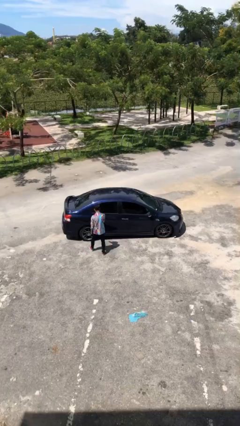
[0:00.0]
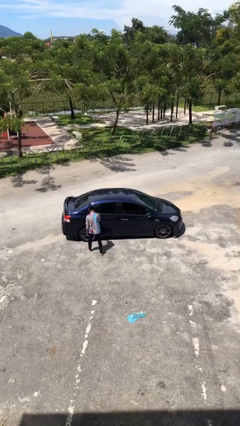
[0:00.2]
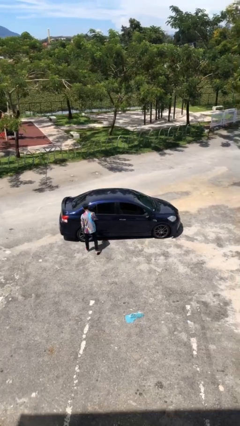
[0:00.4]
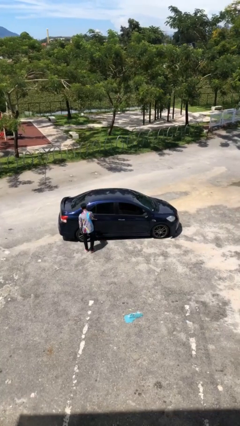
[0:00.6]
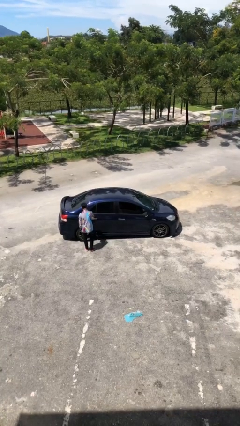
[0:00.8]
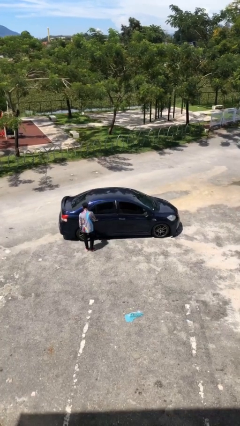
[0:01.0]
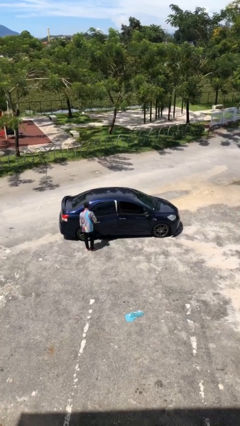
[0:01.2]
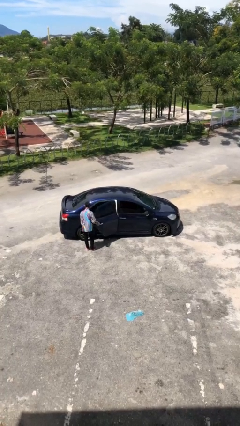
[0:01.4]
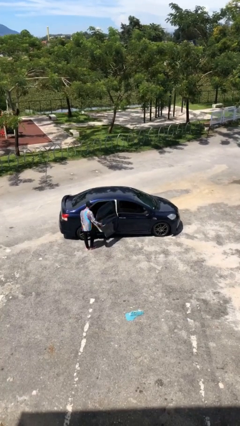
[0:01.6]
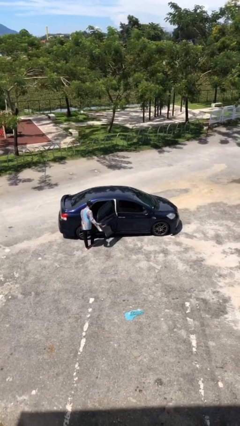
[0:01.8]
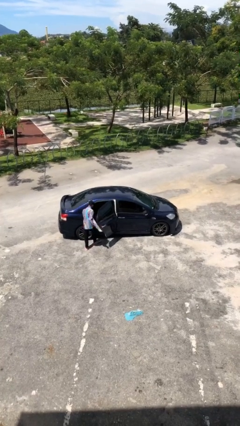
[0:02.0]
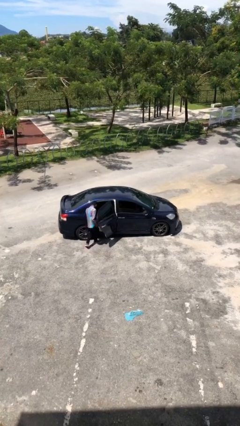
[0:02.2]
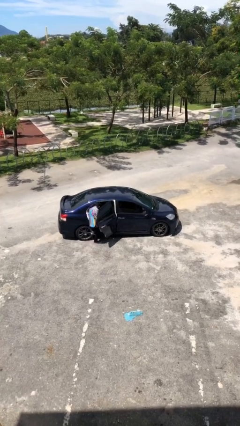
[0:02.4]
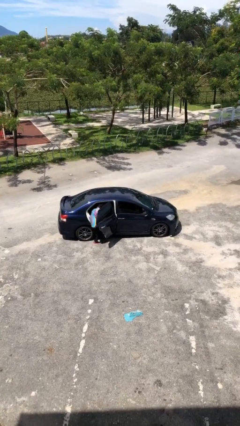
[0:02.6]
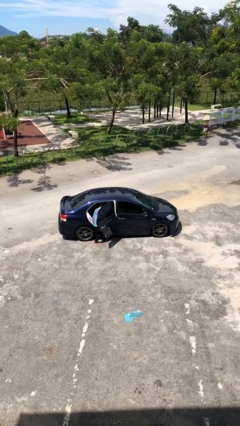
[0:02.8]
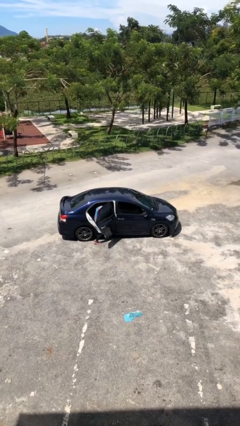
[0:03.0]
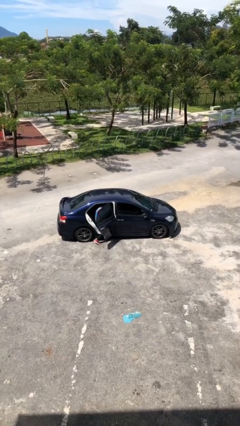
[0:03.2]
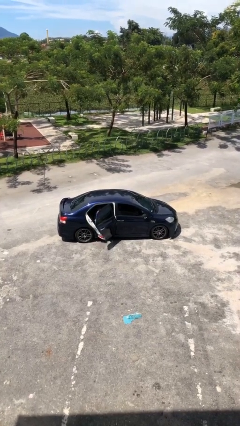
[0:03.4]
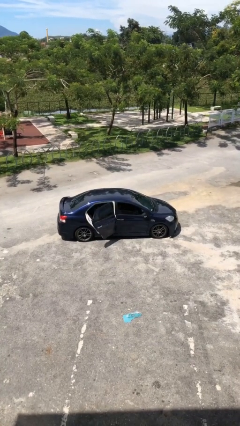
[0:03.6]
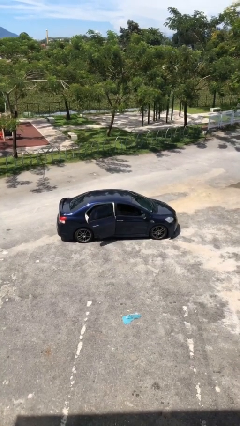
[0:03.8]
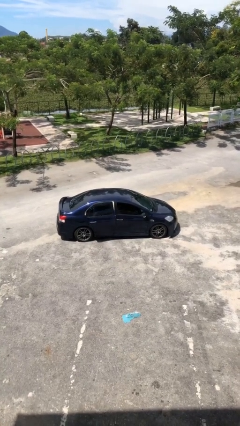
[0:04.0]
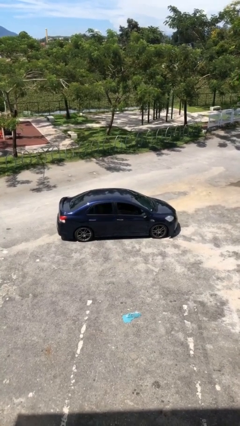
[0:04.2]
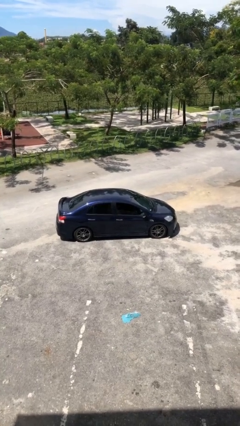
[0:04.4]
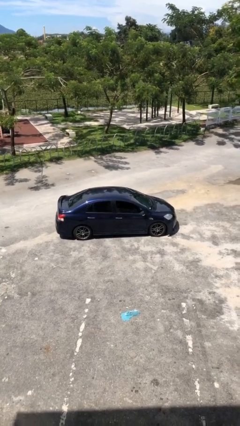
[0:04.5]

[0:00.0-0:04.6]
car picks up person

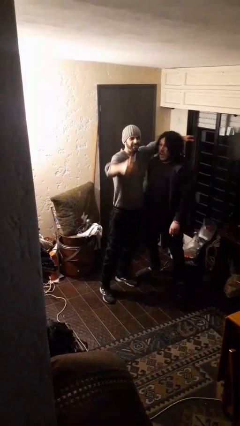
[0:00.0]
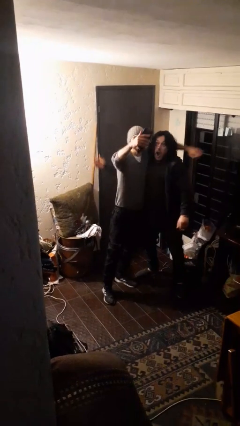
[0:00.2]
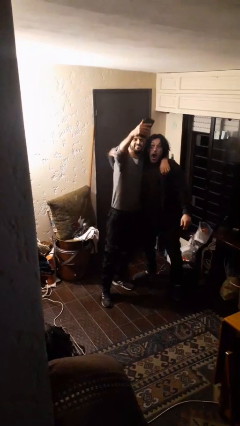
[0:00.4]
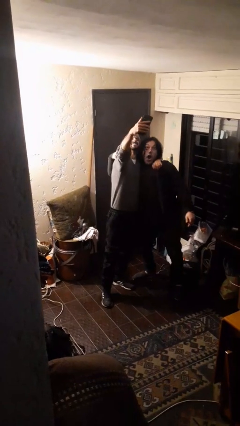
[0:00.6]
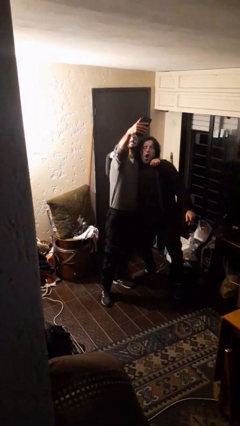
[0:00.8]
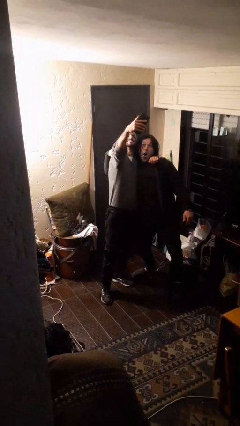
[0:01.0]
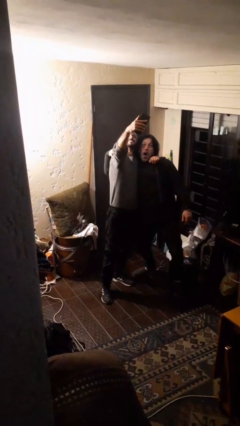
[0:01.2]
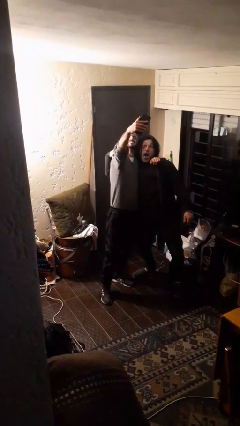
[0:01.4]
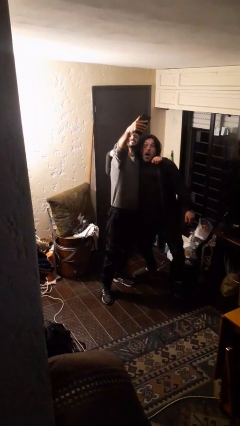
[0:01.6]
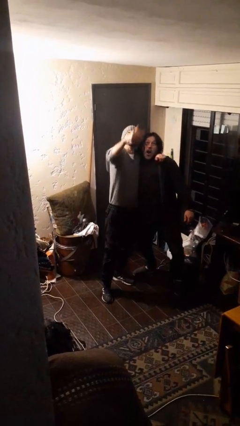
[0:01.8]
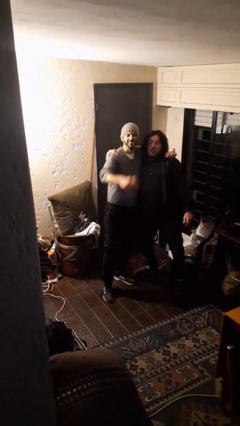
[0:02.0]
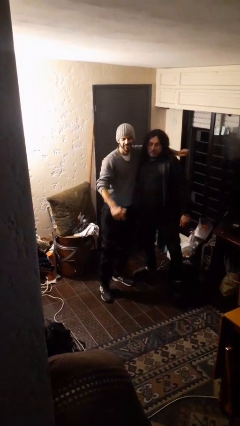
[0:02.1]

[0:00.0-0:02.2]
person takes selfie with person

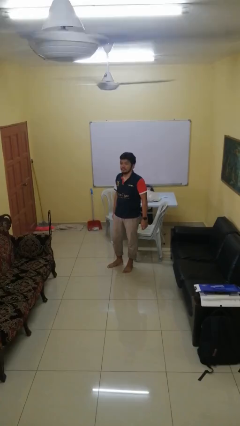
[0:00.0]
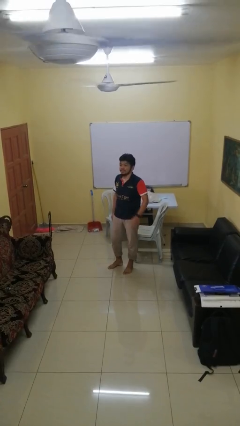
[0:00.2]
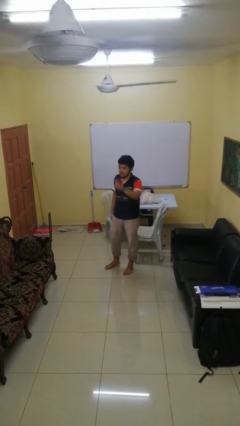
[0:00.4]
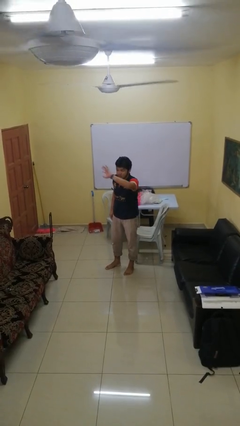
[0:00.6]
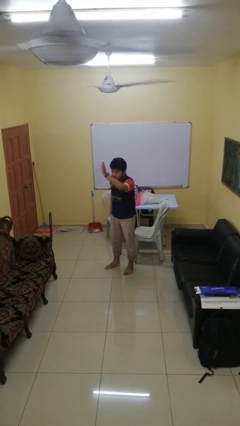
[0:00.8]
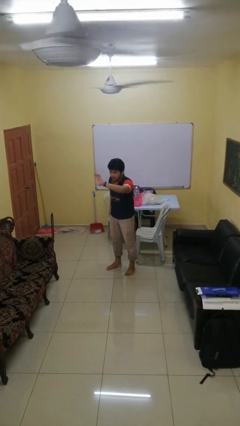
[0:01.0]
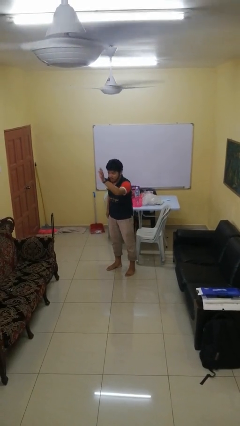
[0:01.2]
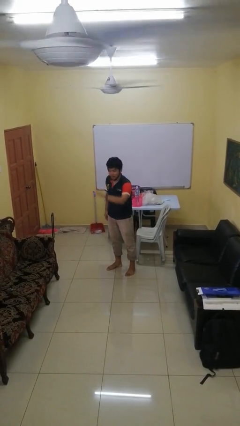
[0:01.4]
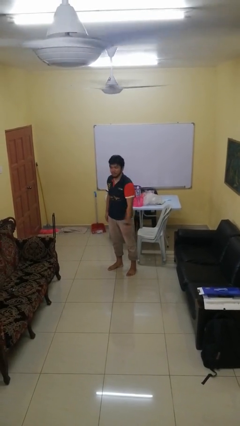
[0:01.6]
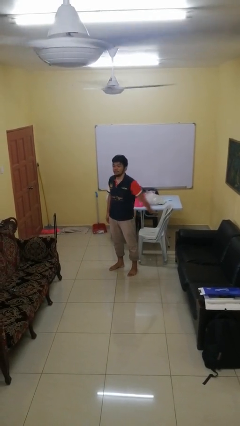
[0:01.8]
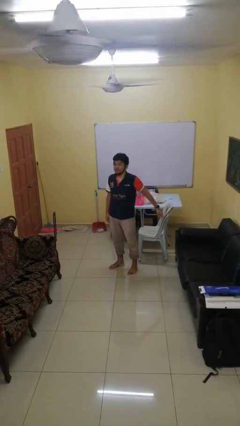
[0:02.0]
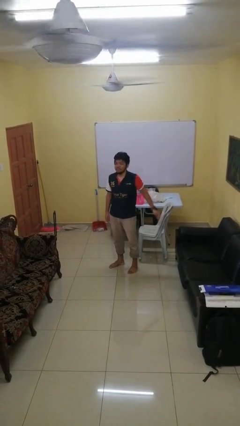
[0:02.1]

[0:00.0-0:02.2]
person waves at person

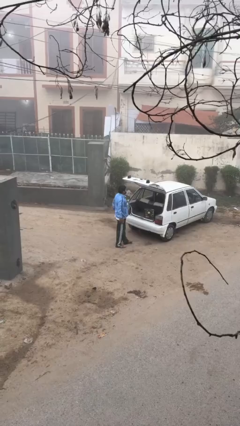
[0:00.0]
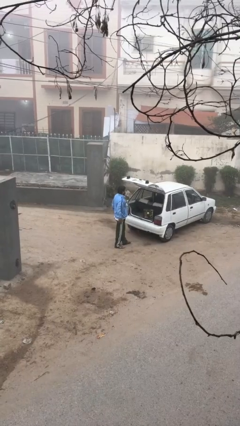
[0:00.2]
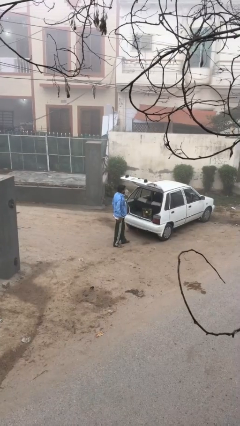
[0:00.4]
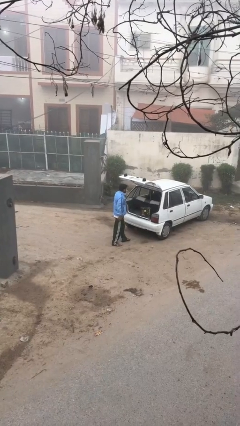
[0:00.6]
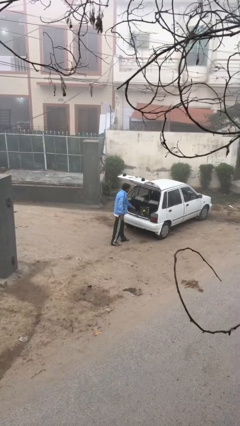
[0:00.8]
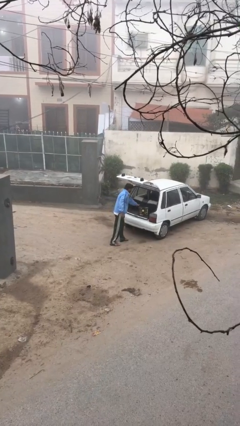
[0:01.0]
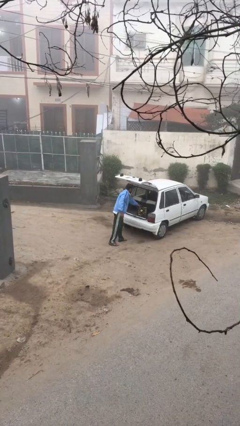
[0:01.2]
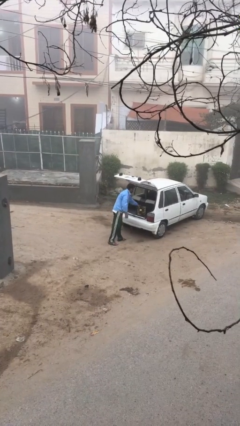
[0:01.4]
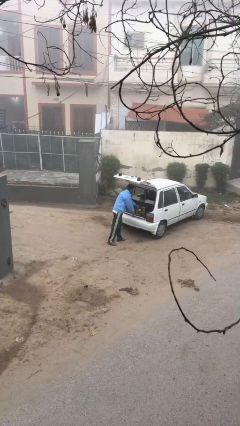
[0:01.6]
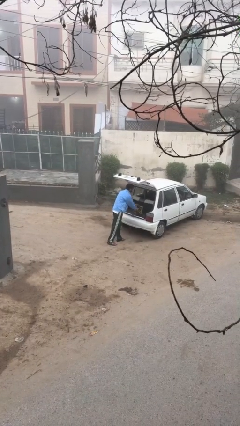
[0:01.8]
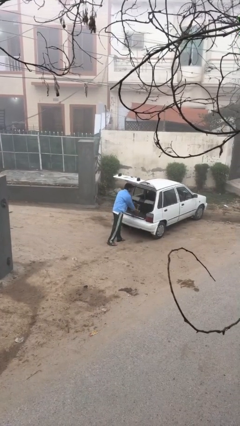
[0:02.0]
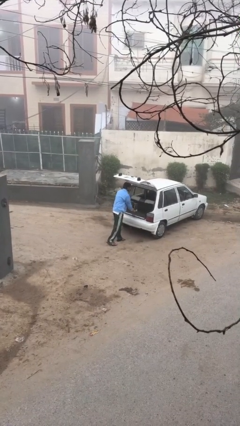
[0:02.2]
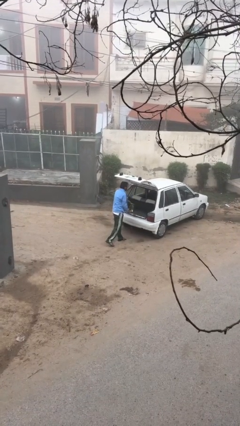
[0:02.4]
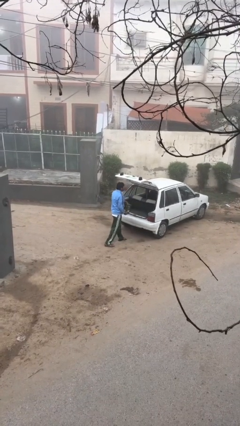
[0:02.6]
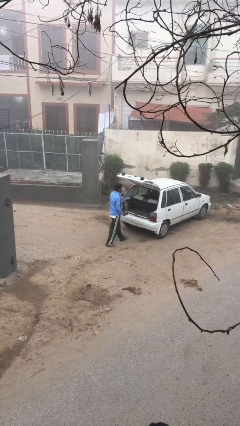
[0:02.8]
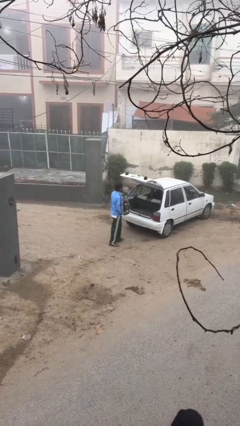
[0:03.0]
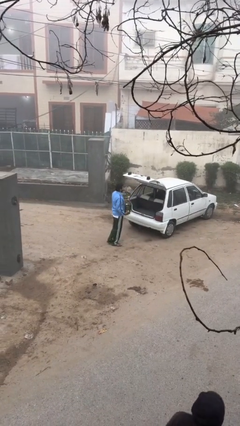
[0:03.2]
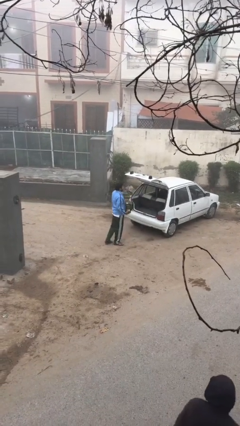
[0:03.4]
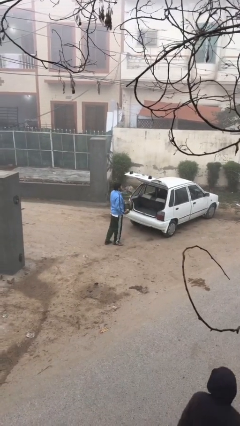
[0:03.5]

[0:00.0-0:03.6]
person unloads car

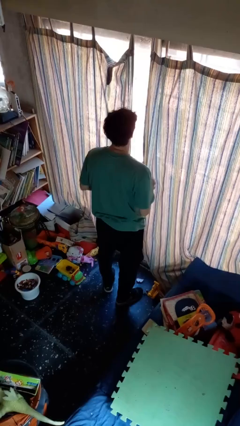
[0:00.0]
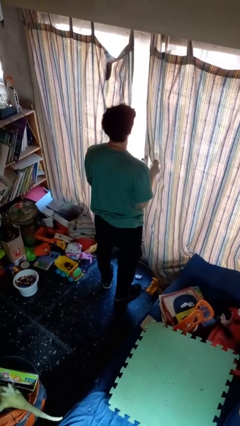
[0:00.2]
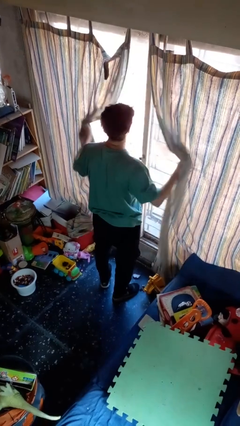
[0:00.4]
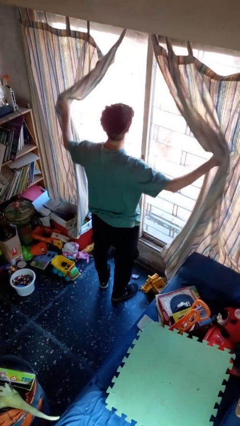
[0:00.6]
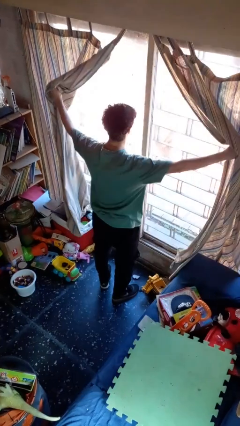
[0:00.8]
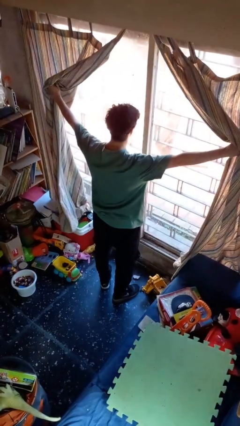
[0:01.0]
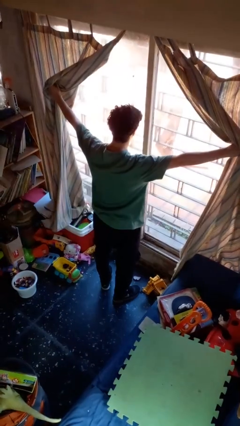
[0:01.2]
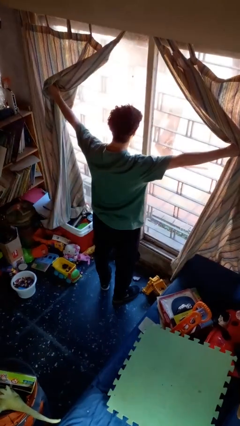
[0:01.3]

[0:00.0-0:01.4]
person opens curtains

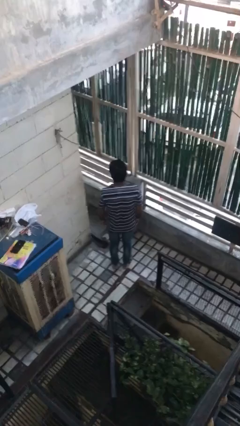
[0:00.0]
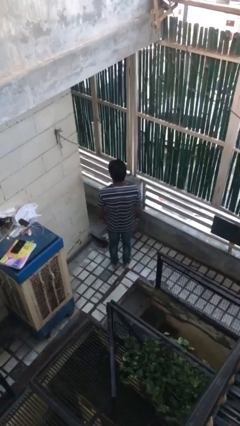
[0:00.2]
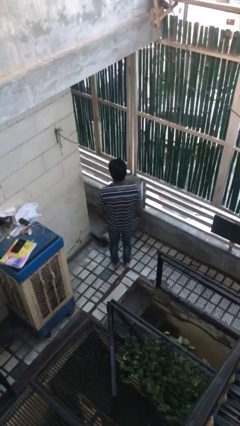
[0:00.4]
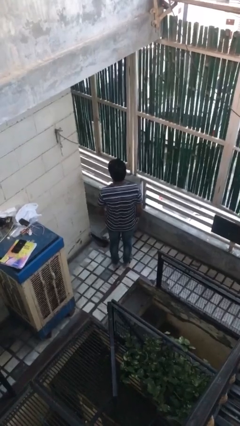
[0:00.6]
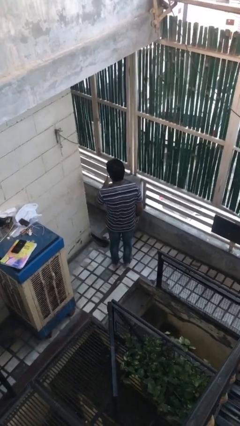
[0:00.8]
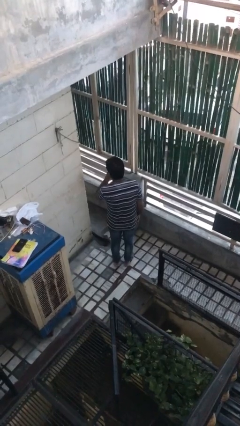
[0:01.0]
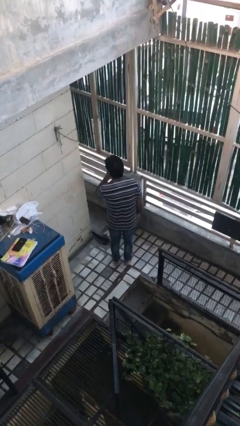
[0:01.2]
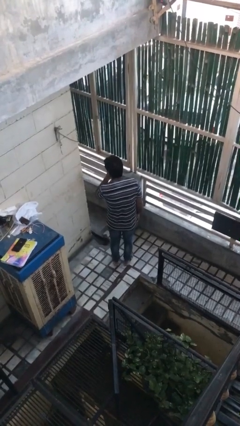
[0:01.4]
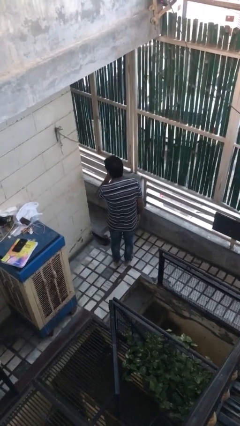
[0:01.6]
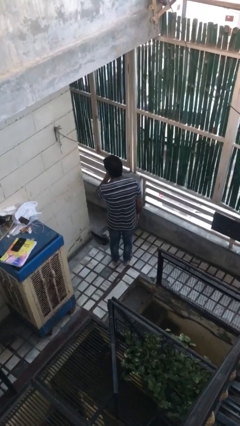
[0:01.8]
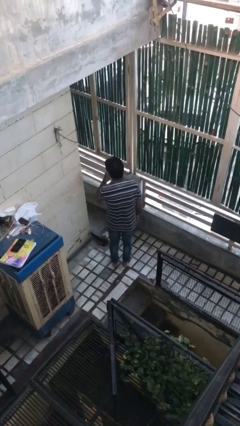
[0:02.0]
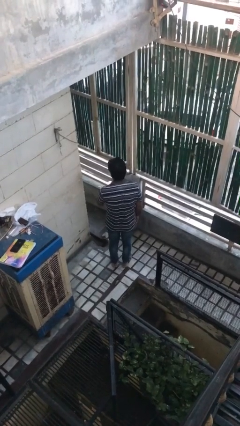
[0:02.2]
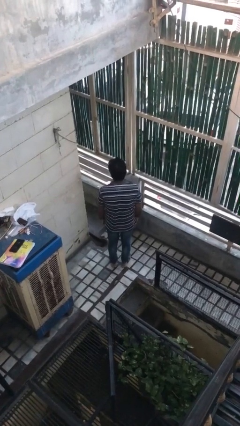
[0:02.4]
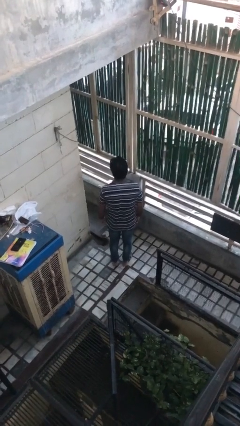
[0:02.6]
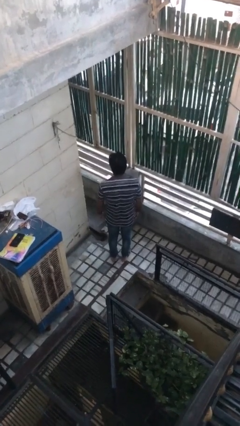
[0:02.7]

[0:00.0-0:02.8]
person gestures be quiet

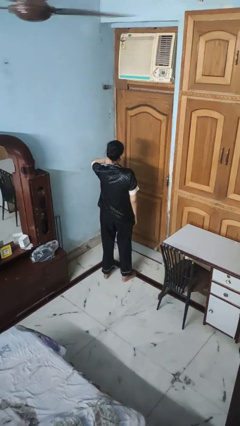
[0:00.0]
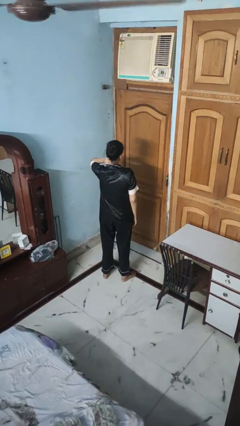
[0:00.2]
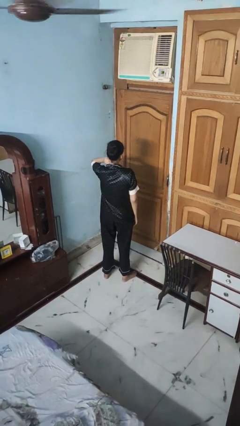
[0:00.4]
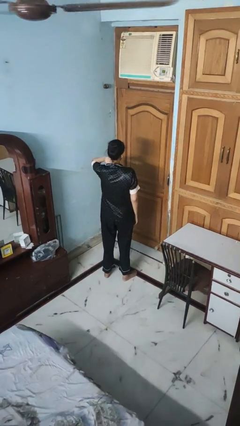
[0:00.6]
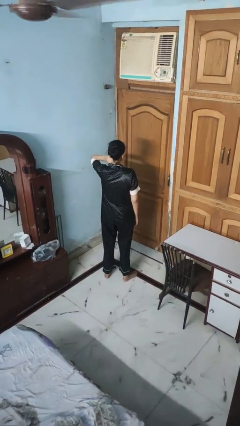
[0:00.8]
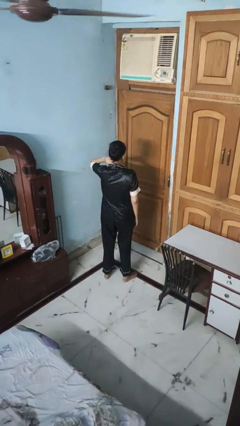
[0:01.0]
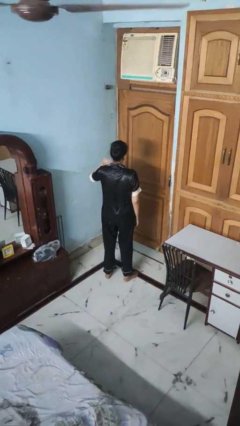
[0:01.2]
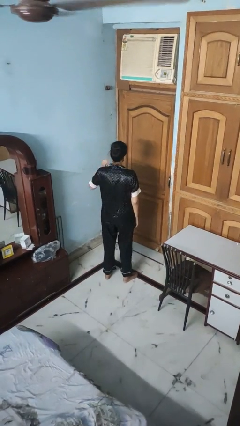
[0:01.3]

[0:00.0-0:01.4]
person rubs neck
